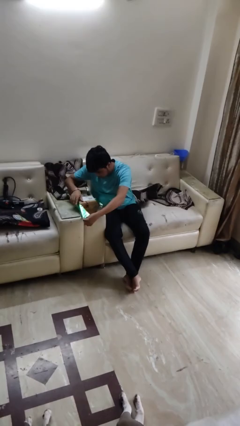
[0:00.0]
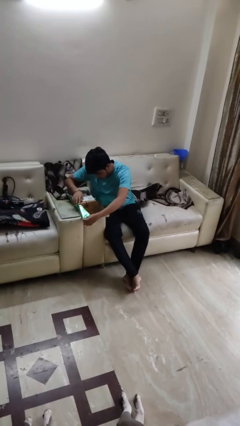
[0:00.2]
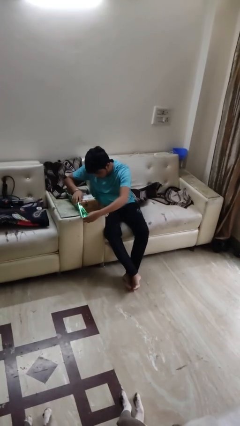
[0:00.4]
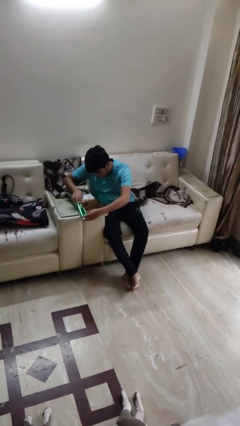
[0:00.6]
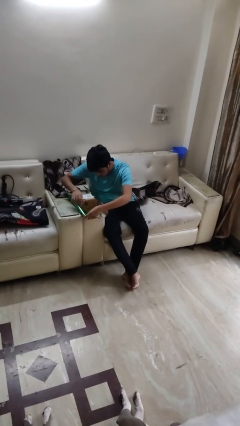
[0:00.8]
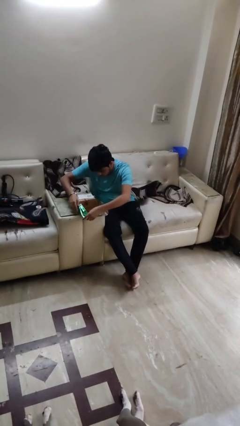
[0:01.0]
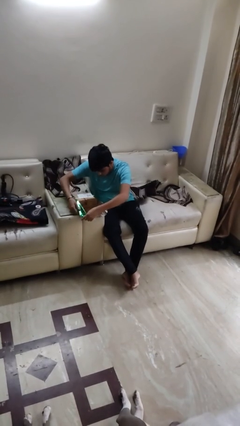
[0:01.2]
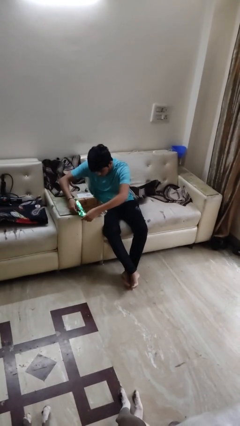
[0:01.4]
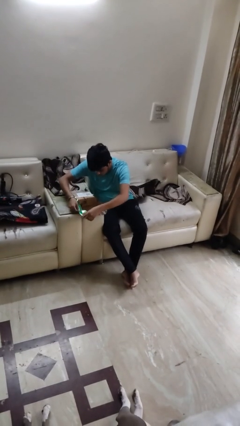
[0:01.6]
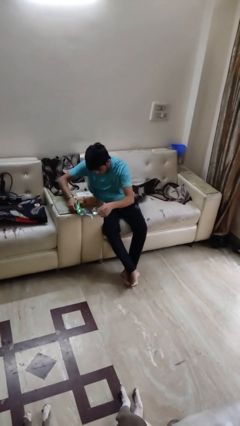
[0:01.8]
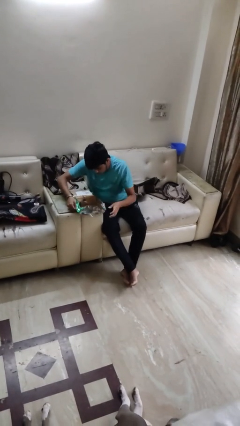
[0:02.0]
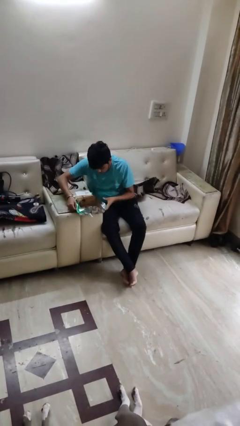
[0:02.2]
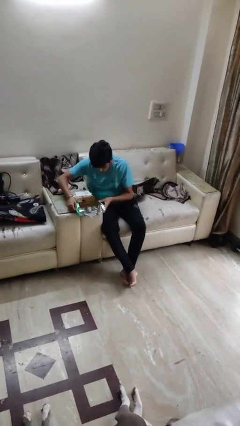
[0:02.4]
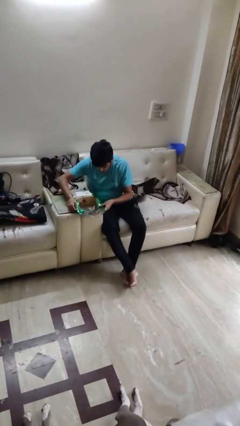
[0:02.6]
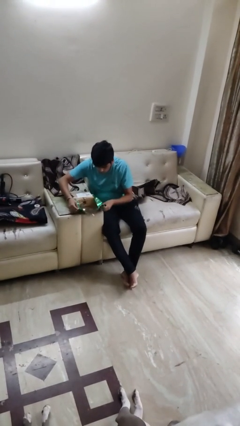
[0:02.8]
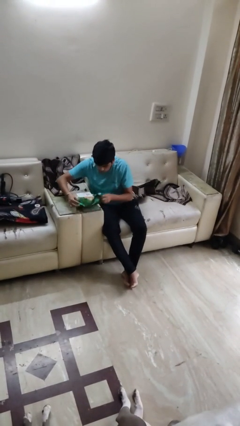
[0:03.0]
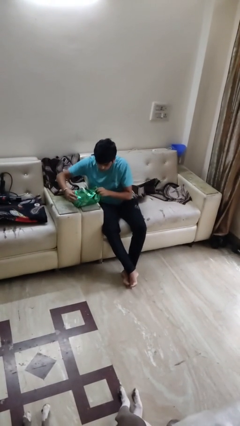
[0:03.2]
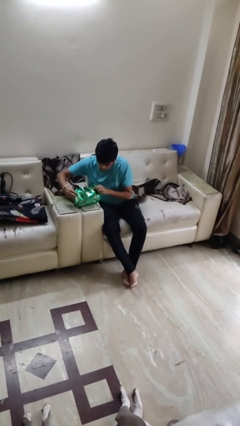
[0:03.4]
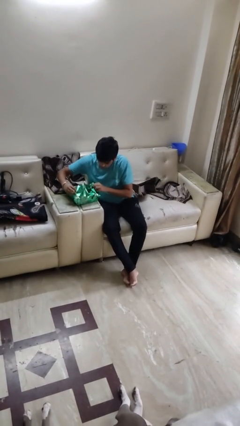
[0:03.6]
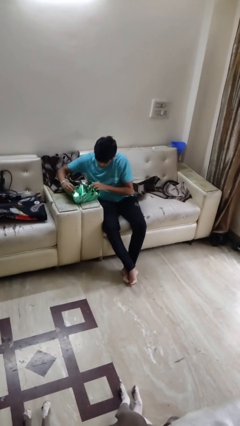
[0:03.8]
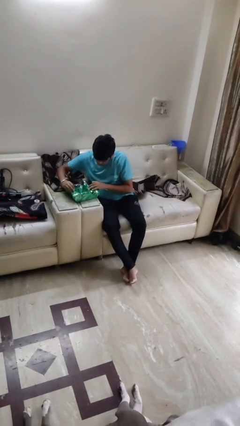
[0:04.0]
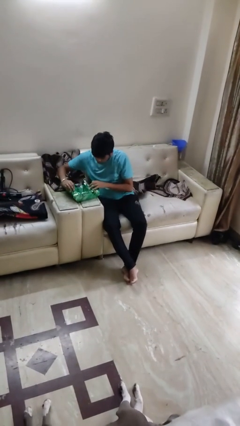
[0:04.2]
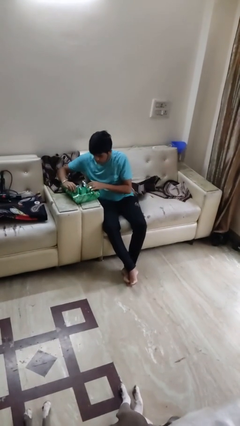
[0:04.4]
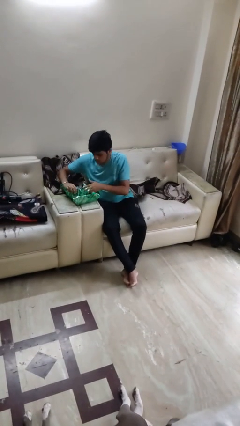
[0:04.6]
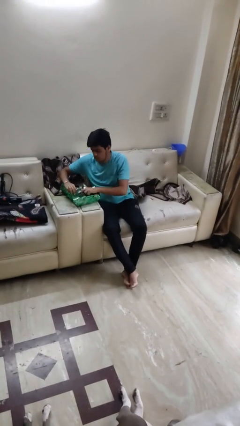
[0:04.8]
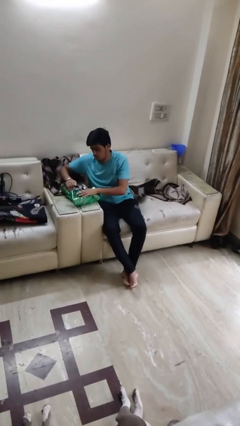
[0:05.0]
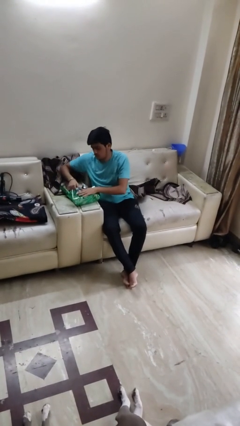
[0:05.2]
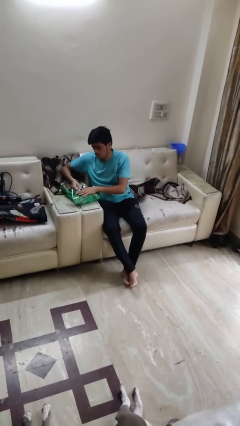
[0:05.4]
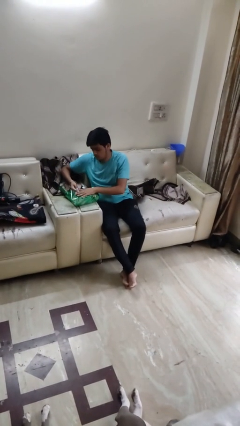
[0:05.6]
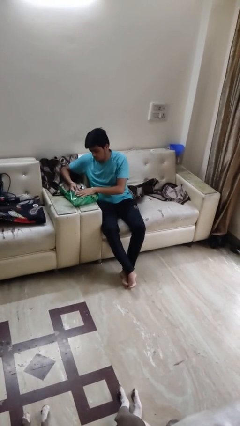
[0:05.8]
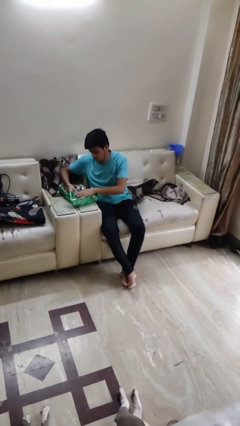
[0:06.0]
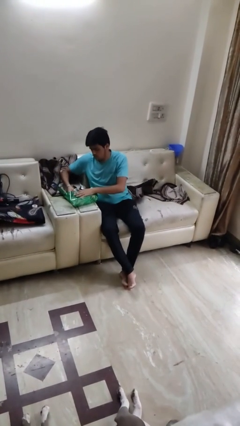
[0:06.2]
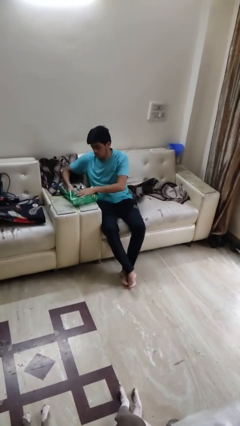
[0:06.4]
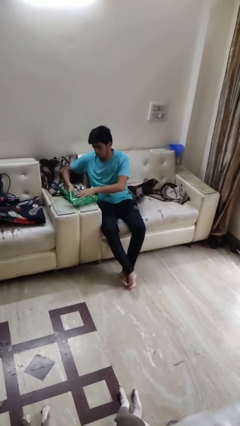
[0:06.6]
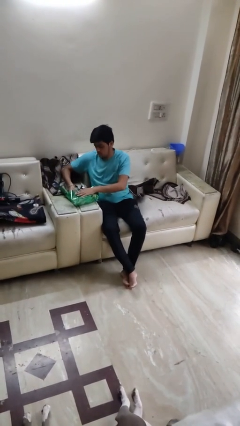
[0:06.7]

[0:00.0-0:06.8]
person wraps box

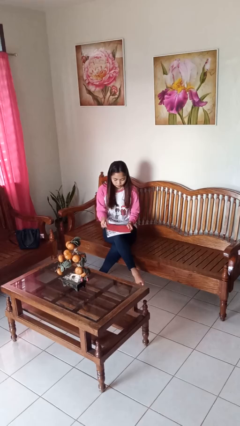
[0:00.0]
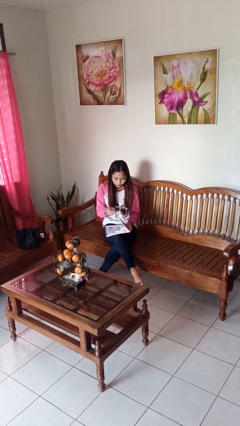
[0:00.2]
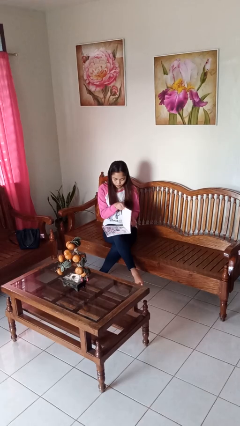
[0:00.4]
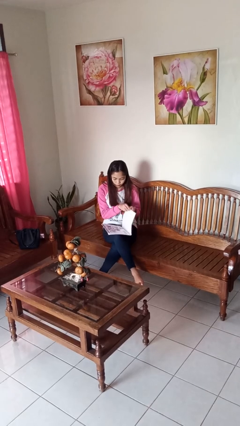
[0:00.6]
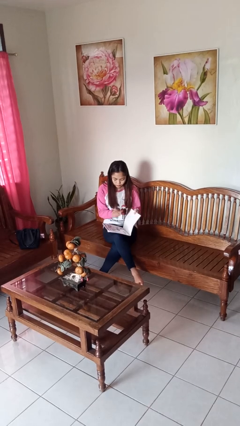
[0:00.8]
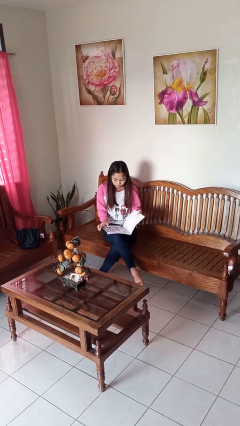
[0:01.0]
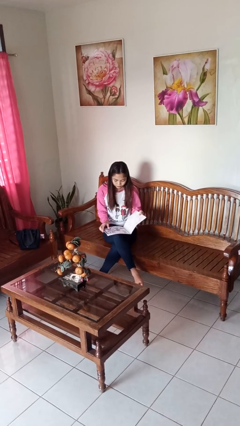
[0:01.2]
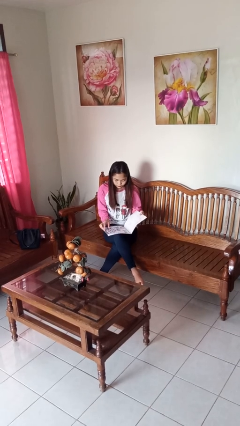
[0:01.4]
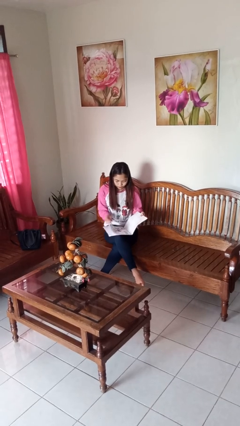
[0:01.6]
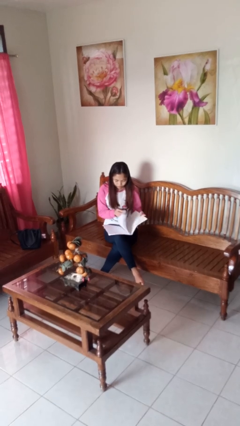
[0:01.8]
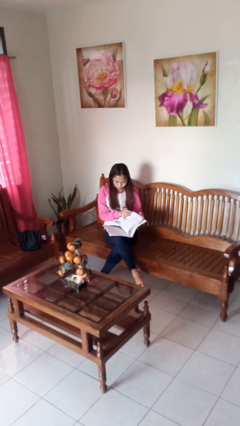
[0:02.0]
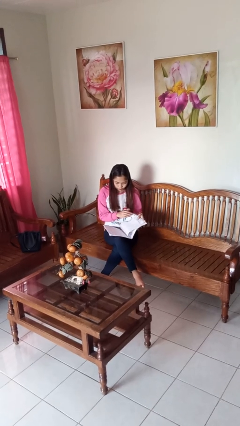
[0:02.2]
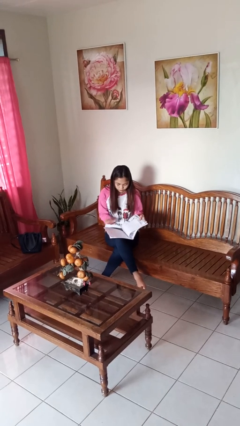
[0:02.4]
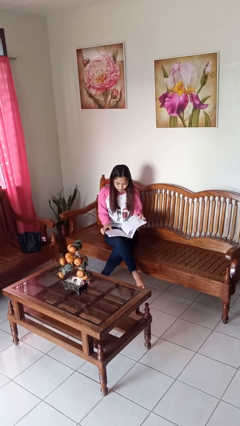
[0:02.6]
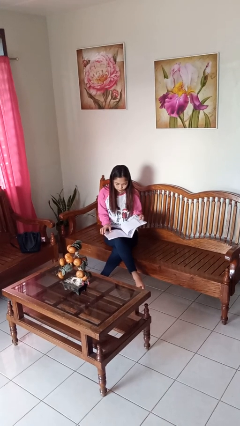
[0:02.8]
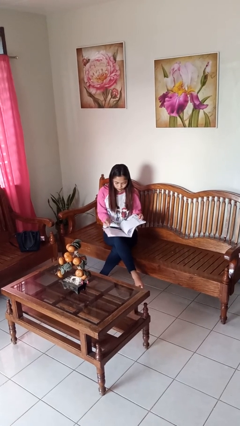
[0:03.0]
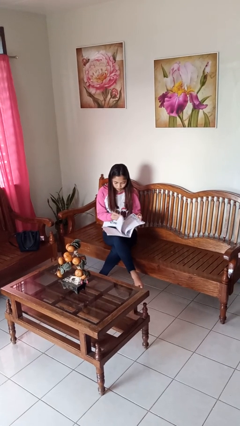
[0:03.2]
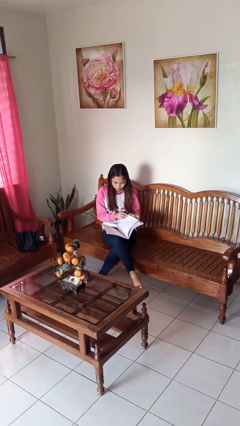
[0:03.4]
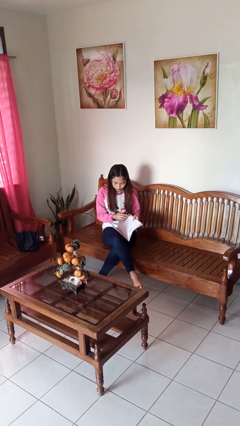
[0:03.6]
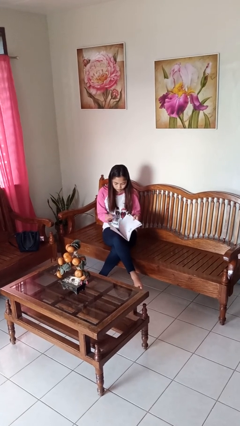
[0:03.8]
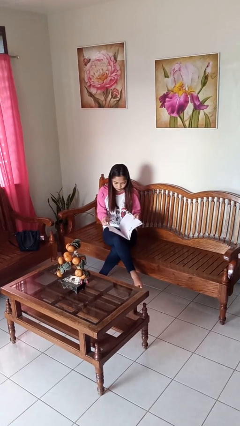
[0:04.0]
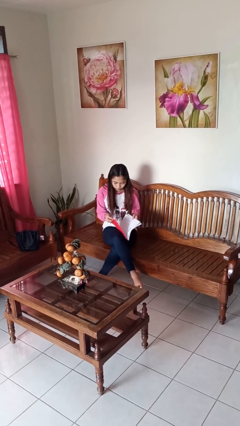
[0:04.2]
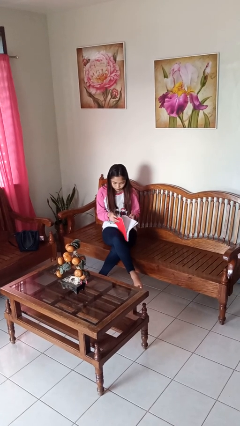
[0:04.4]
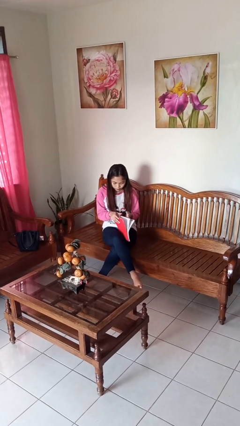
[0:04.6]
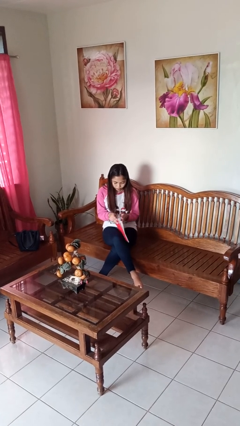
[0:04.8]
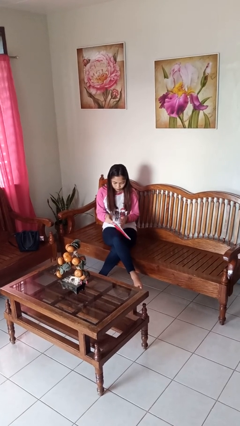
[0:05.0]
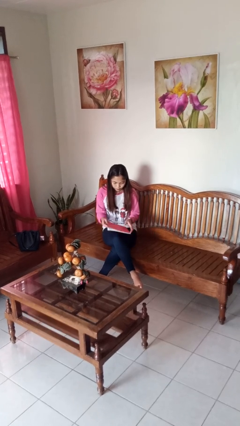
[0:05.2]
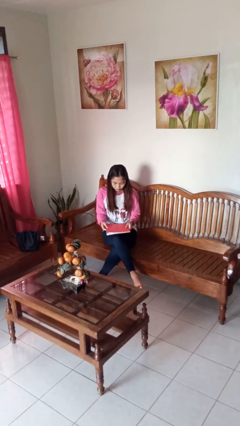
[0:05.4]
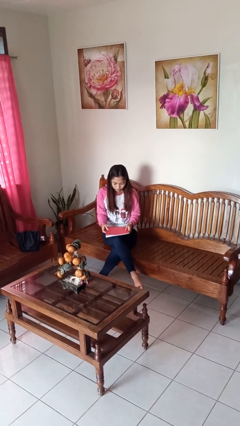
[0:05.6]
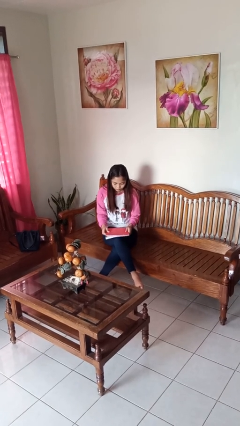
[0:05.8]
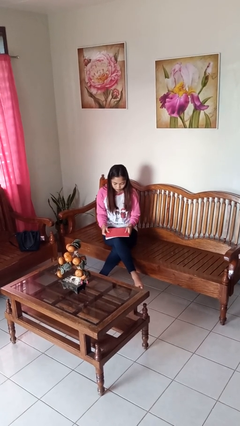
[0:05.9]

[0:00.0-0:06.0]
person reads magazine

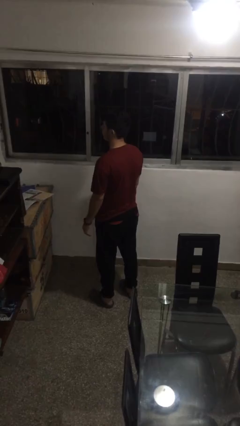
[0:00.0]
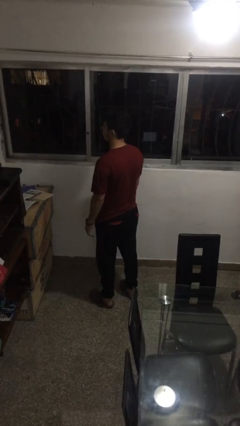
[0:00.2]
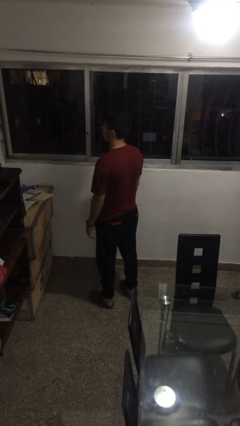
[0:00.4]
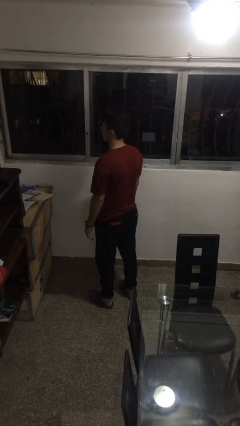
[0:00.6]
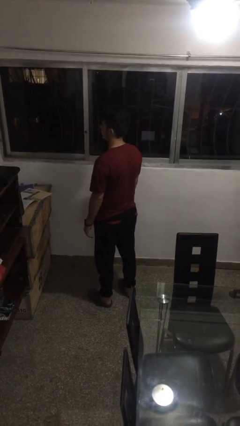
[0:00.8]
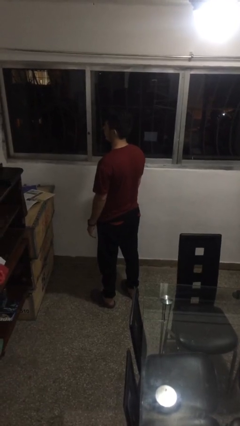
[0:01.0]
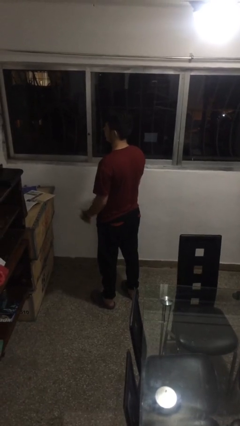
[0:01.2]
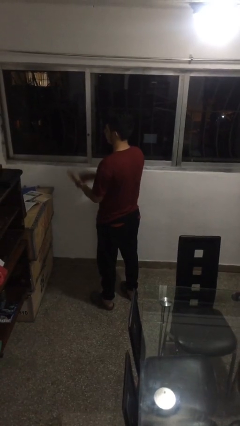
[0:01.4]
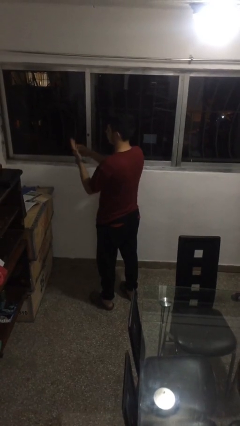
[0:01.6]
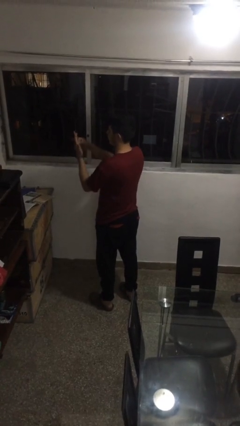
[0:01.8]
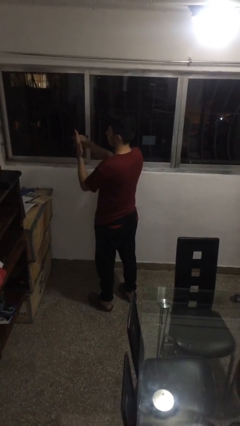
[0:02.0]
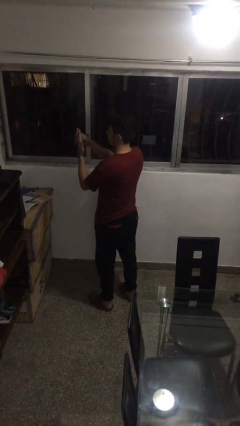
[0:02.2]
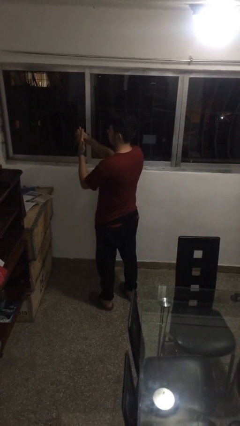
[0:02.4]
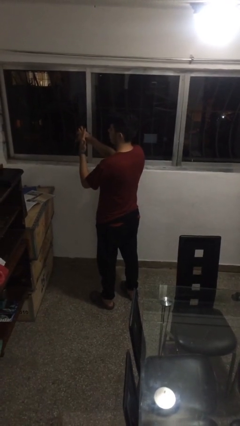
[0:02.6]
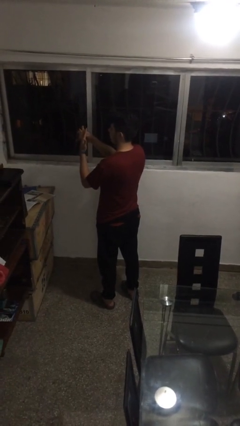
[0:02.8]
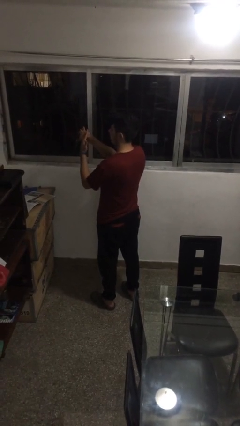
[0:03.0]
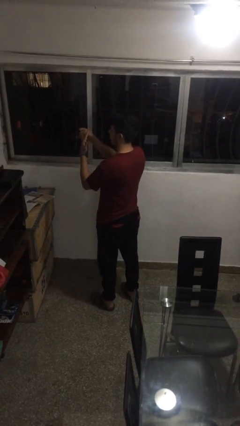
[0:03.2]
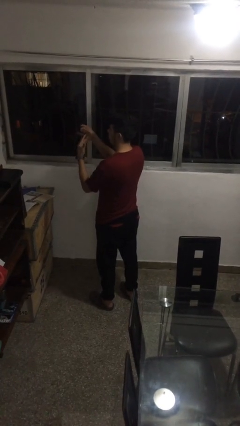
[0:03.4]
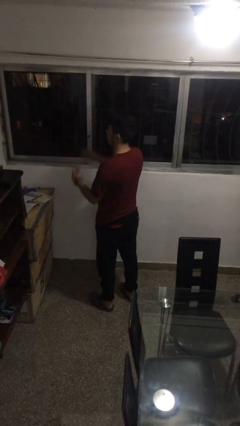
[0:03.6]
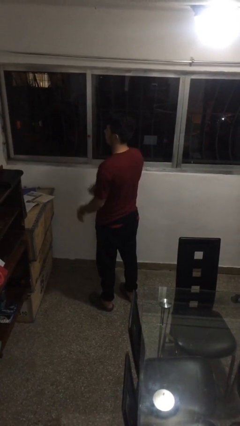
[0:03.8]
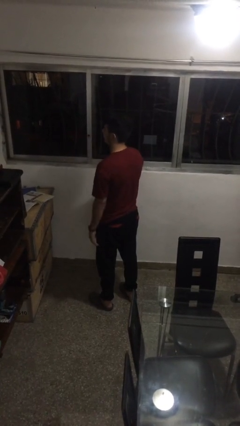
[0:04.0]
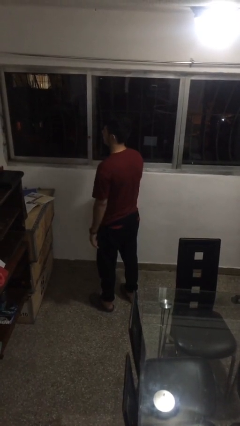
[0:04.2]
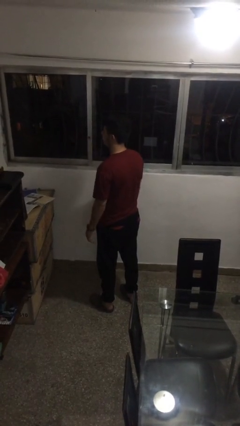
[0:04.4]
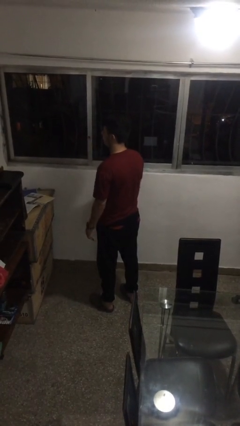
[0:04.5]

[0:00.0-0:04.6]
person takes off ring

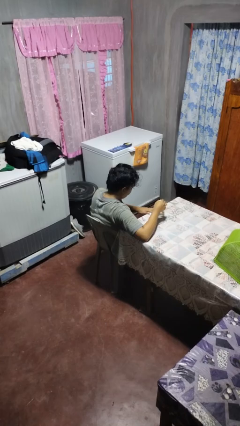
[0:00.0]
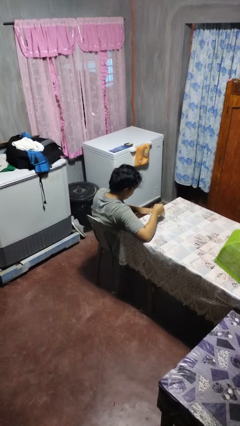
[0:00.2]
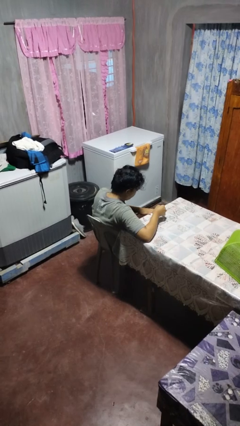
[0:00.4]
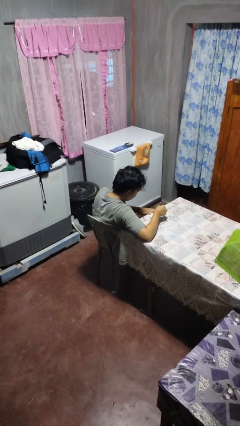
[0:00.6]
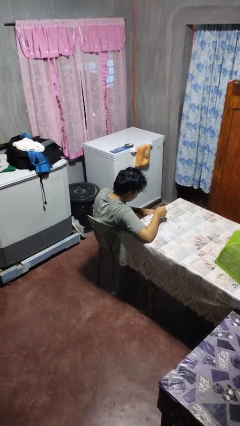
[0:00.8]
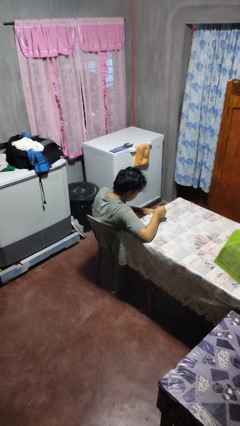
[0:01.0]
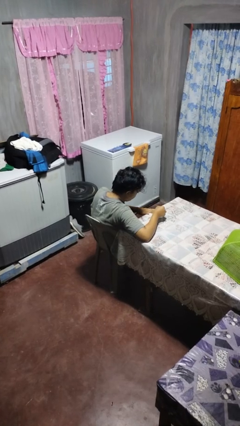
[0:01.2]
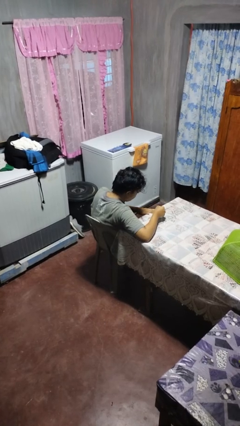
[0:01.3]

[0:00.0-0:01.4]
person paints fingernails
